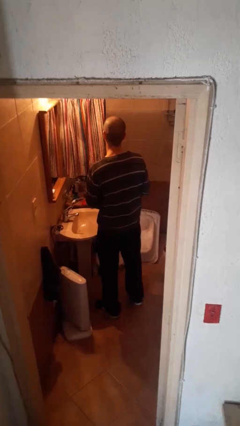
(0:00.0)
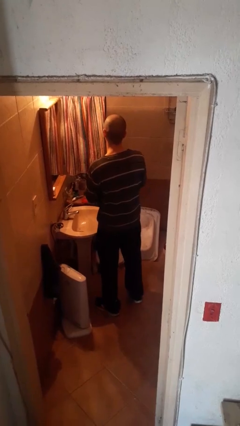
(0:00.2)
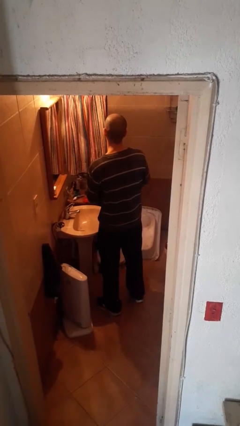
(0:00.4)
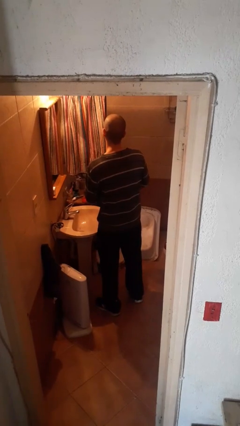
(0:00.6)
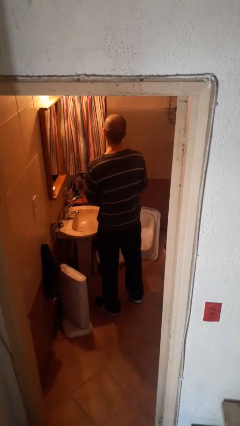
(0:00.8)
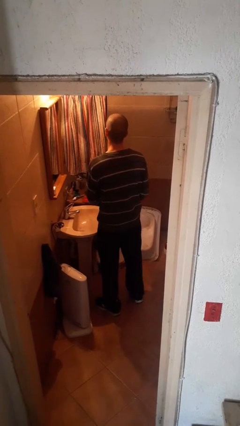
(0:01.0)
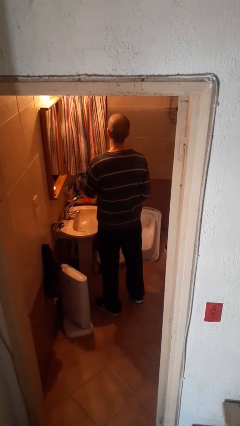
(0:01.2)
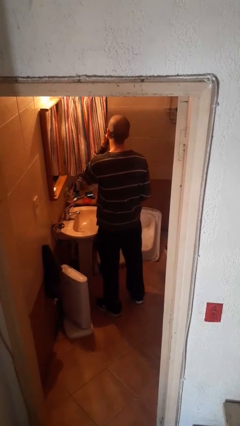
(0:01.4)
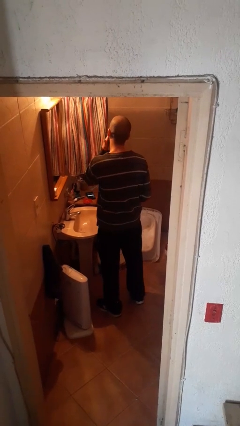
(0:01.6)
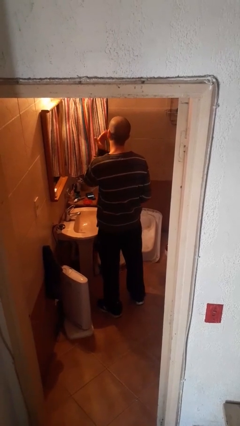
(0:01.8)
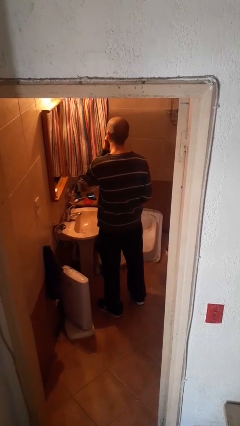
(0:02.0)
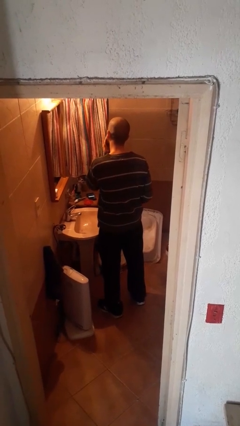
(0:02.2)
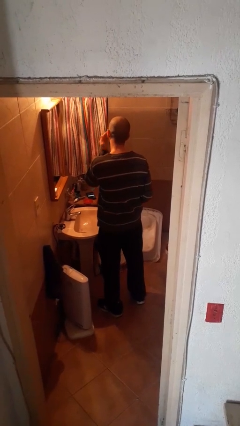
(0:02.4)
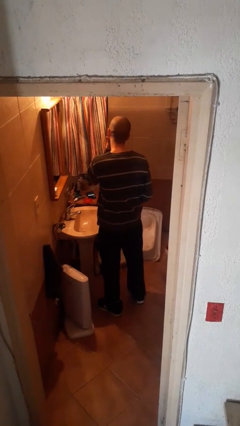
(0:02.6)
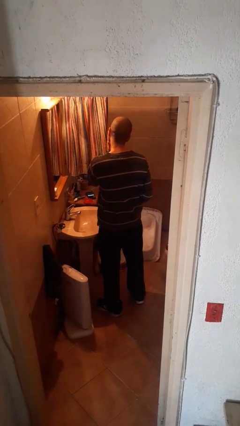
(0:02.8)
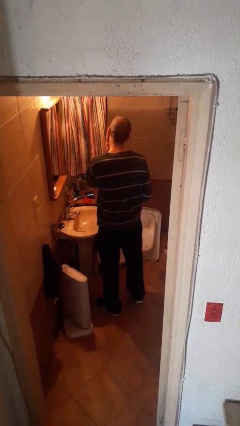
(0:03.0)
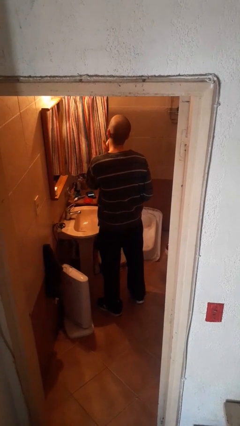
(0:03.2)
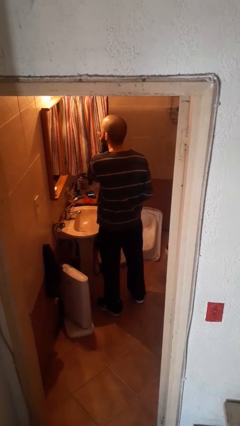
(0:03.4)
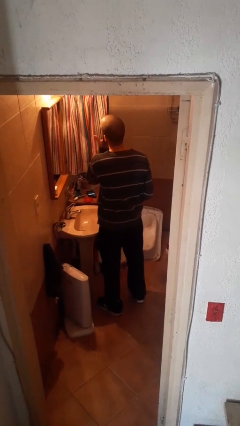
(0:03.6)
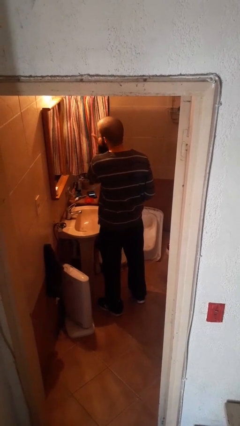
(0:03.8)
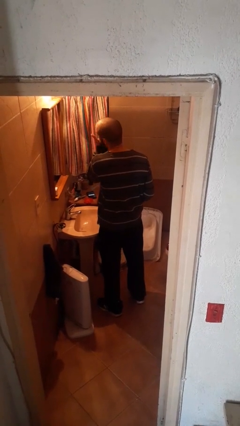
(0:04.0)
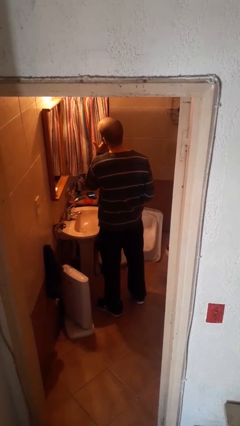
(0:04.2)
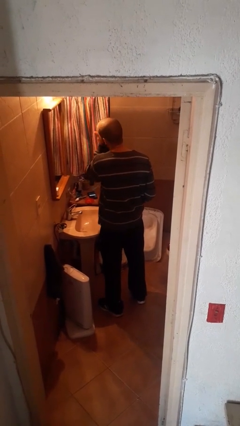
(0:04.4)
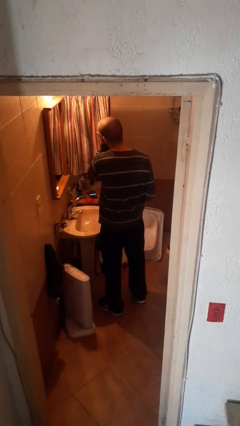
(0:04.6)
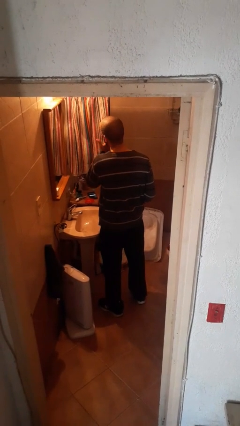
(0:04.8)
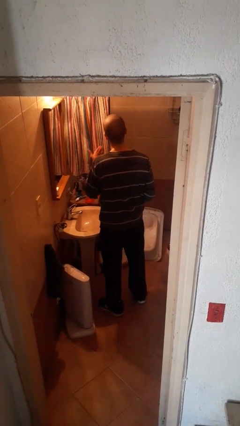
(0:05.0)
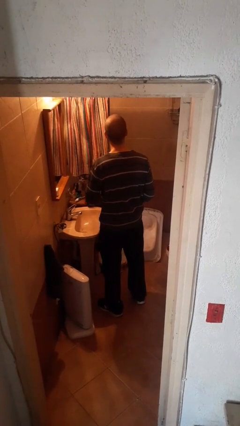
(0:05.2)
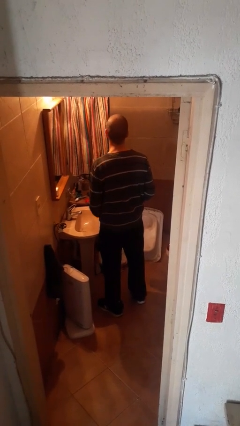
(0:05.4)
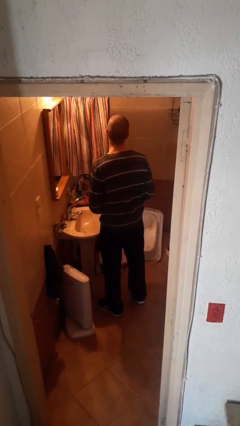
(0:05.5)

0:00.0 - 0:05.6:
person applies facial moisturizer

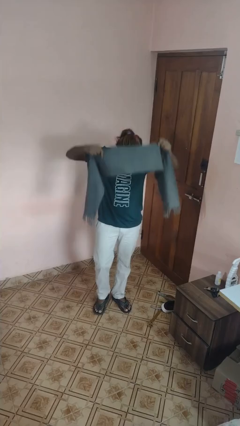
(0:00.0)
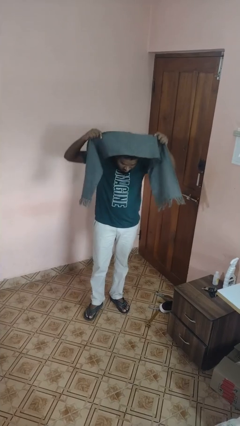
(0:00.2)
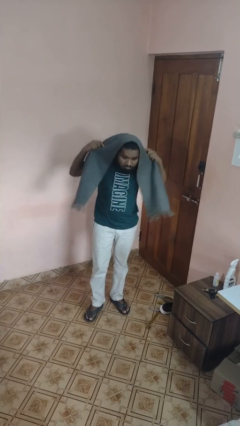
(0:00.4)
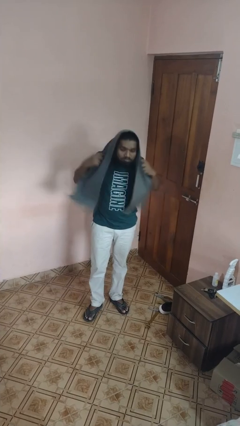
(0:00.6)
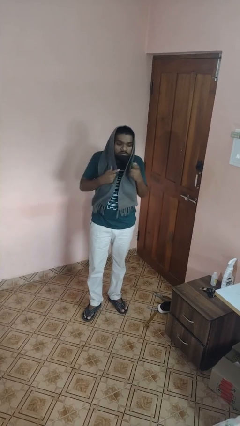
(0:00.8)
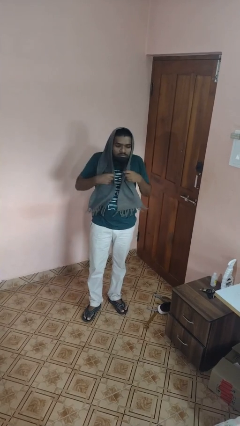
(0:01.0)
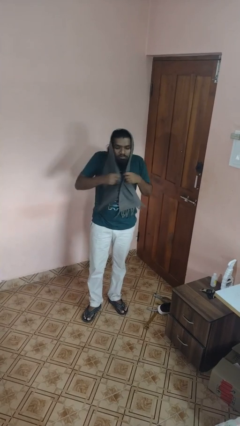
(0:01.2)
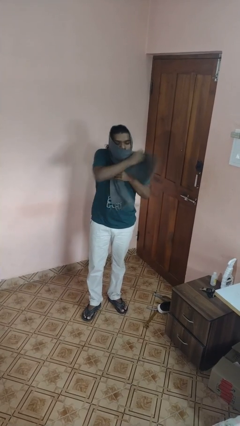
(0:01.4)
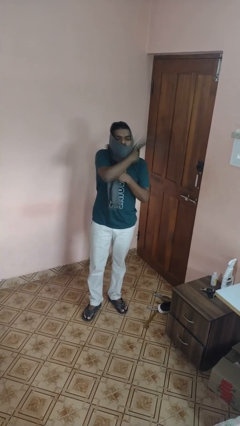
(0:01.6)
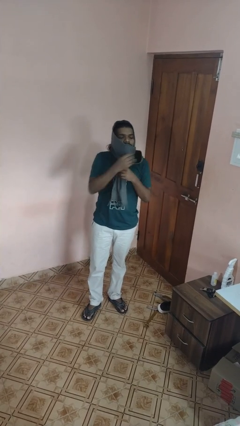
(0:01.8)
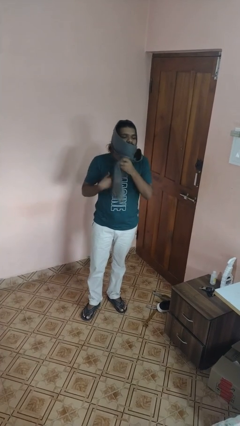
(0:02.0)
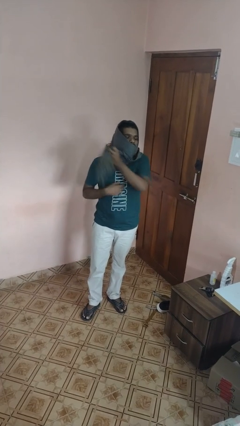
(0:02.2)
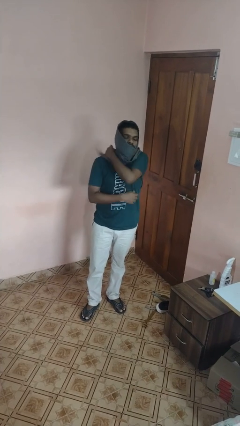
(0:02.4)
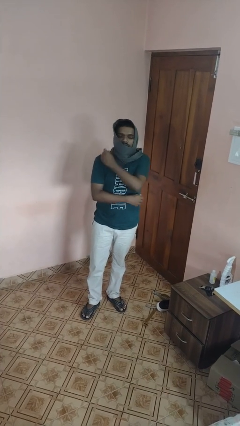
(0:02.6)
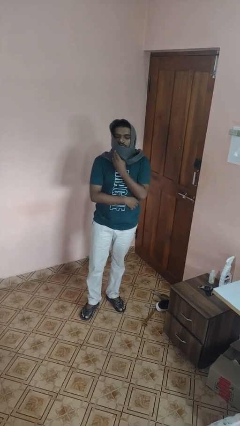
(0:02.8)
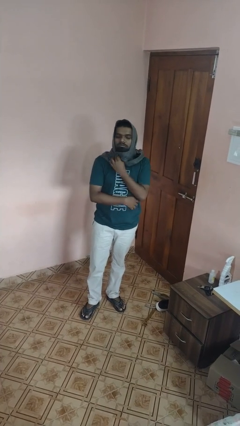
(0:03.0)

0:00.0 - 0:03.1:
person puts on scarf

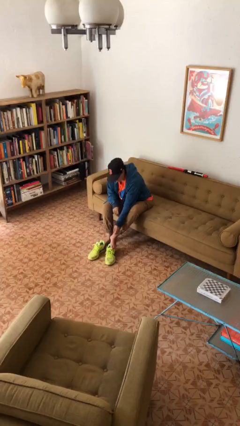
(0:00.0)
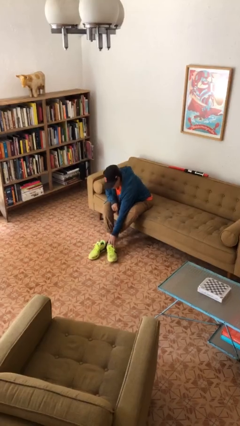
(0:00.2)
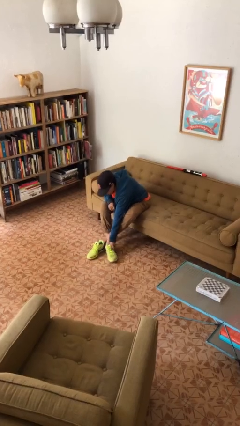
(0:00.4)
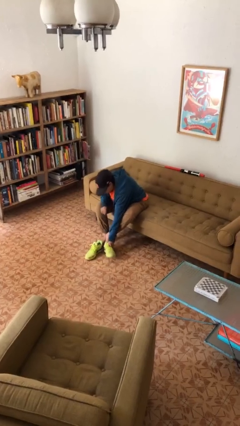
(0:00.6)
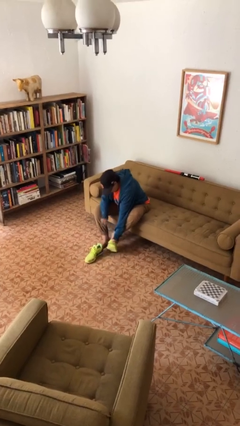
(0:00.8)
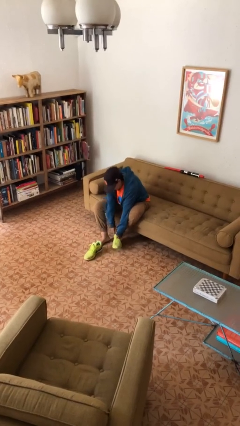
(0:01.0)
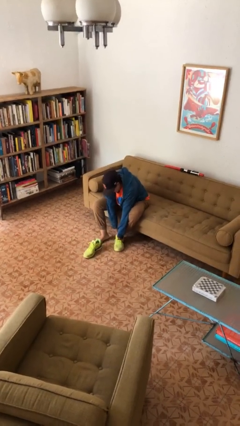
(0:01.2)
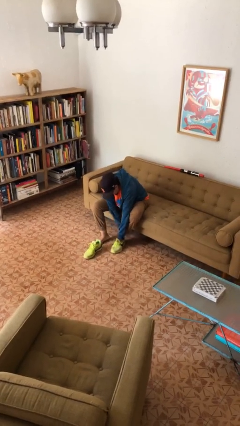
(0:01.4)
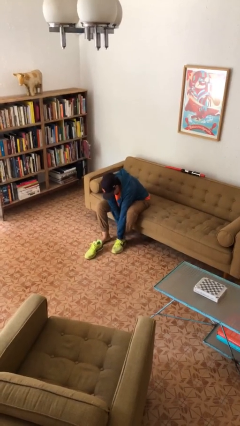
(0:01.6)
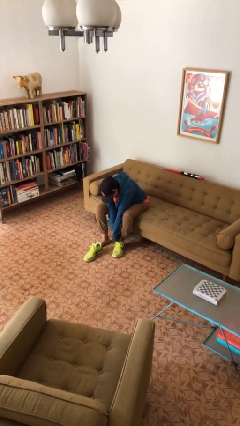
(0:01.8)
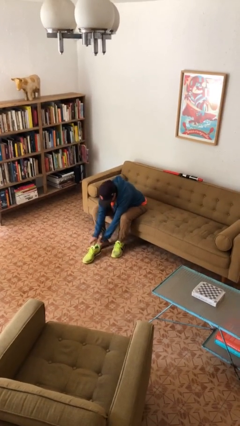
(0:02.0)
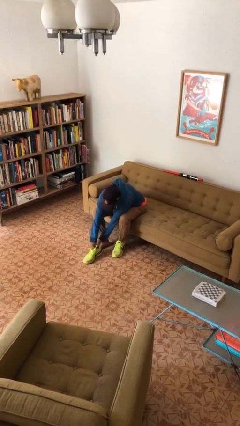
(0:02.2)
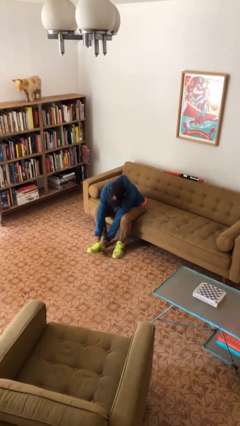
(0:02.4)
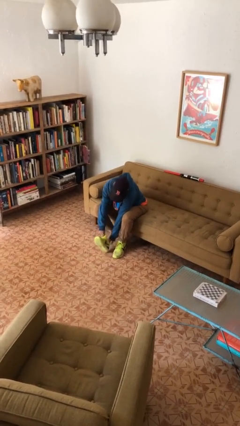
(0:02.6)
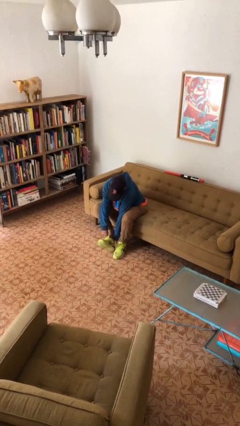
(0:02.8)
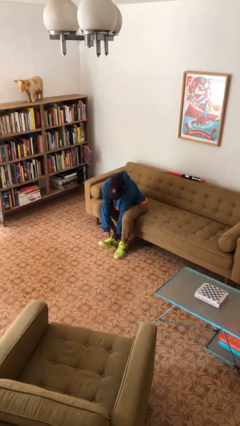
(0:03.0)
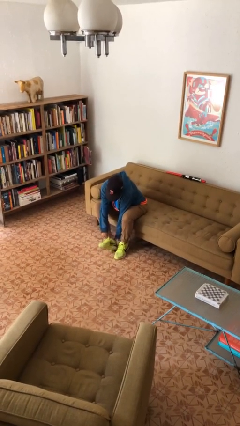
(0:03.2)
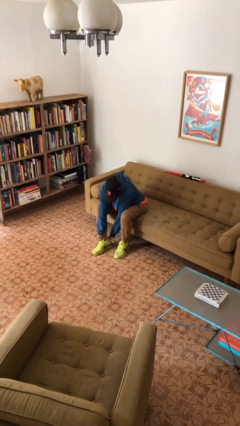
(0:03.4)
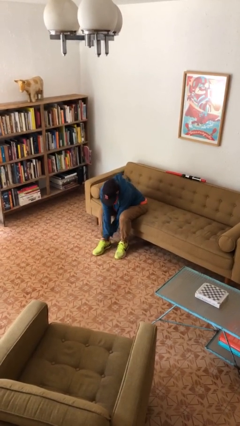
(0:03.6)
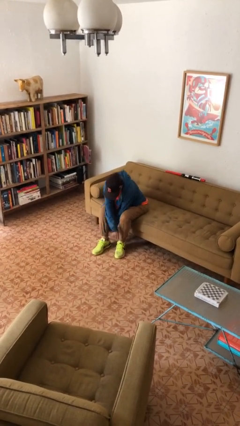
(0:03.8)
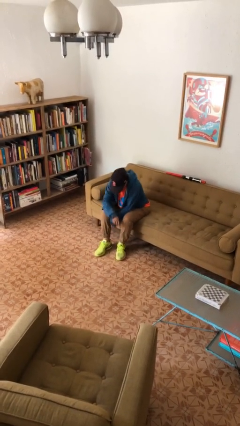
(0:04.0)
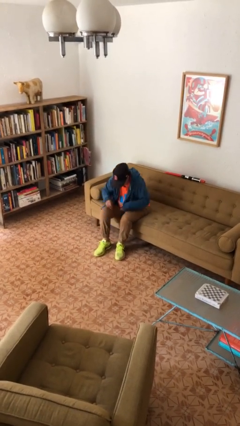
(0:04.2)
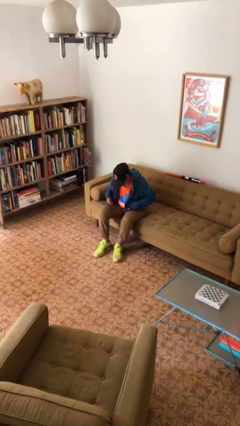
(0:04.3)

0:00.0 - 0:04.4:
person puts on shoes

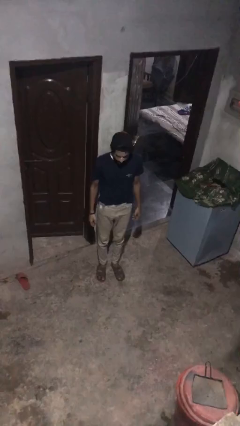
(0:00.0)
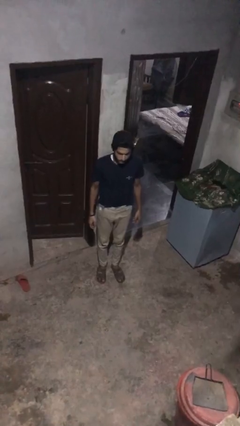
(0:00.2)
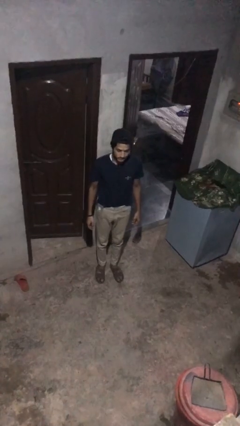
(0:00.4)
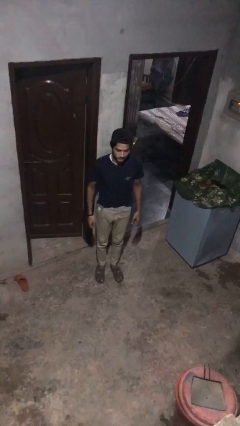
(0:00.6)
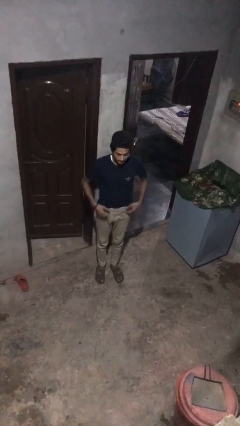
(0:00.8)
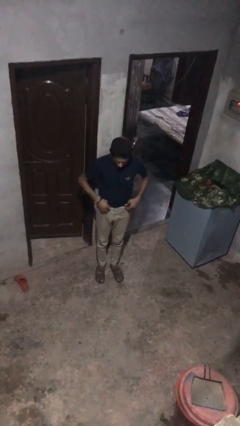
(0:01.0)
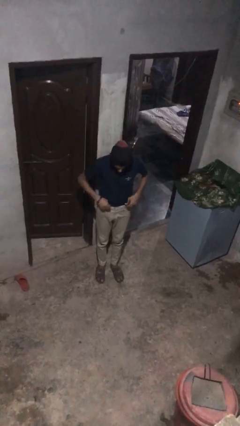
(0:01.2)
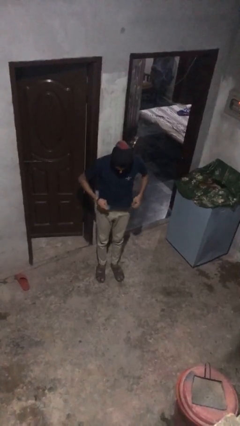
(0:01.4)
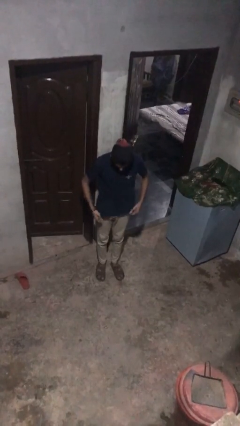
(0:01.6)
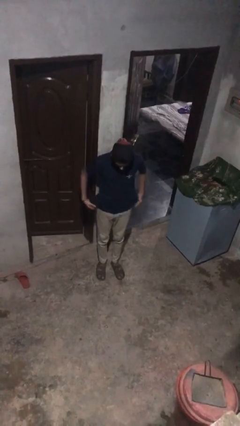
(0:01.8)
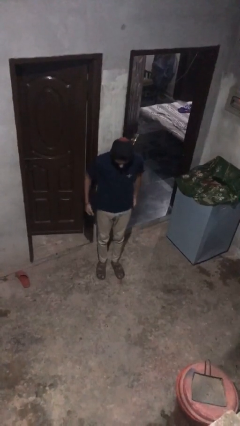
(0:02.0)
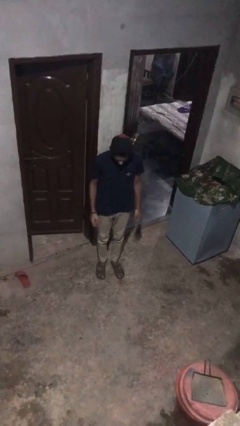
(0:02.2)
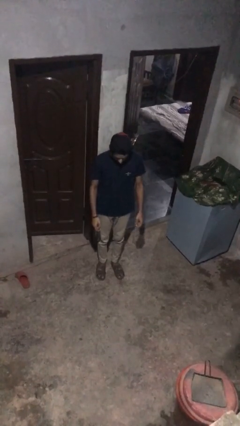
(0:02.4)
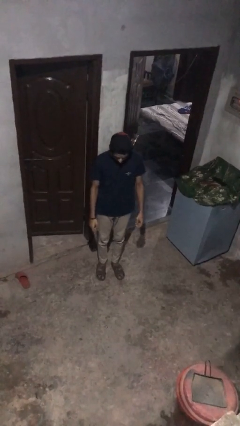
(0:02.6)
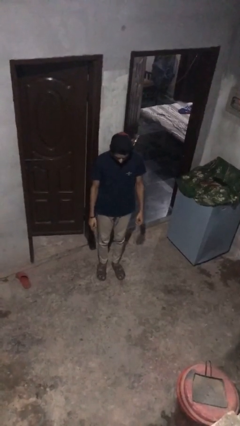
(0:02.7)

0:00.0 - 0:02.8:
person untucks shirt

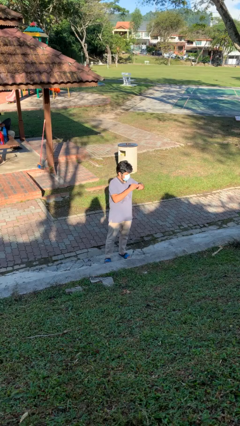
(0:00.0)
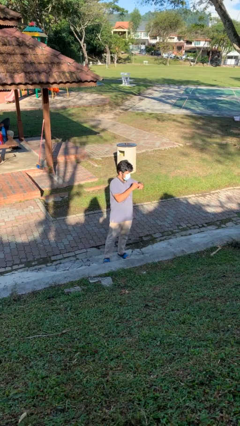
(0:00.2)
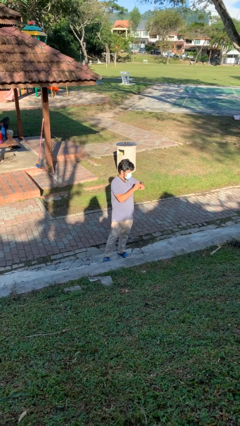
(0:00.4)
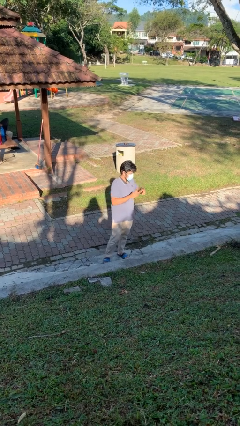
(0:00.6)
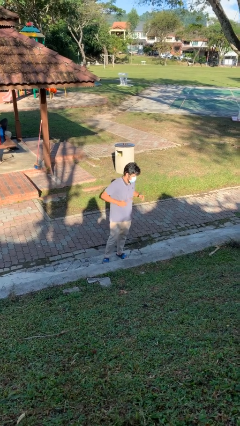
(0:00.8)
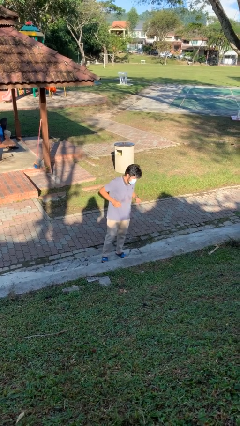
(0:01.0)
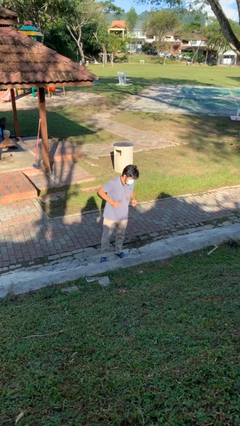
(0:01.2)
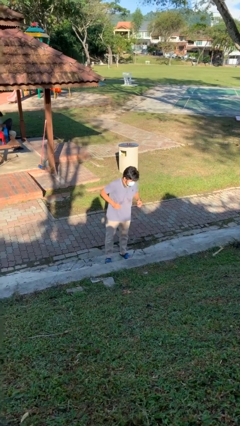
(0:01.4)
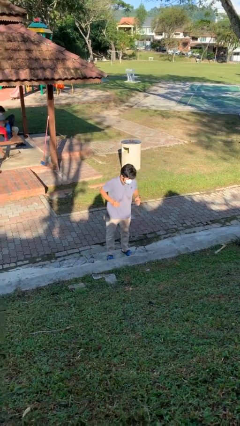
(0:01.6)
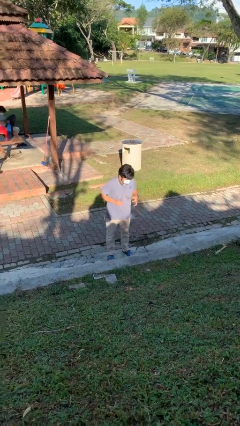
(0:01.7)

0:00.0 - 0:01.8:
person puts on ring
